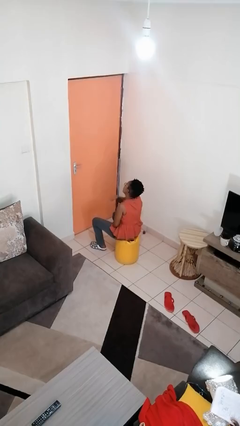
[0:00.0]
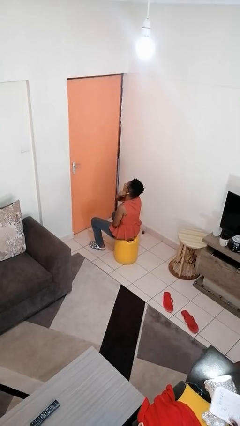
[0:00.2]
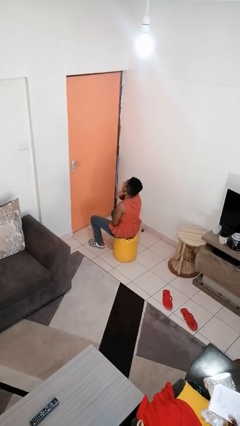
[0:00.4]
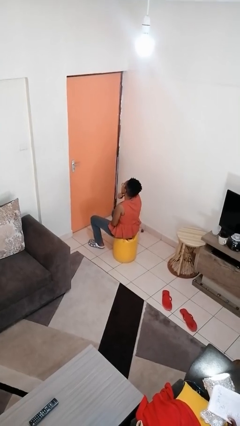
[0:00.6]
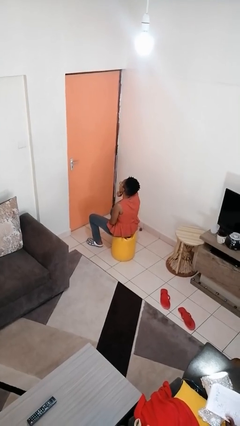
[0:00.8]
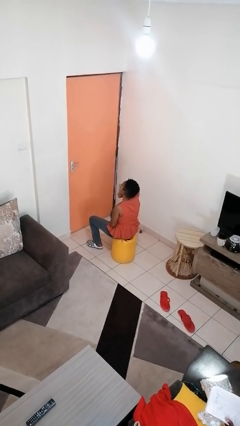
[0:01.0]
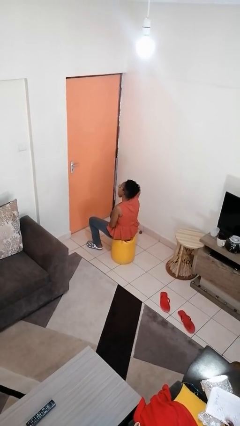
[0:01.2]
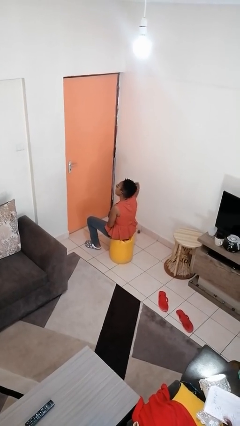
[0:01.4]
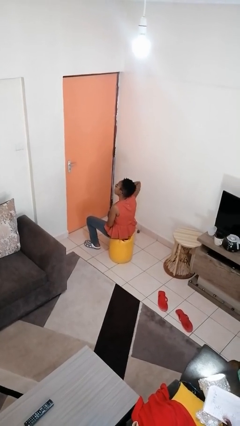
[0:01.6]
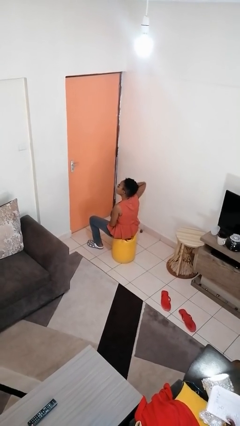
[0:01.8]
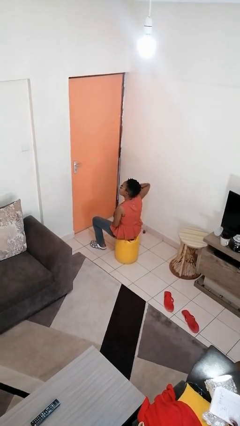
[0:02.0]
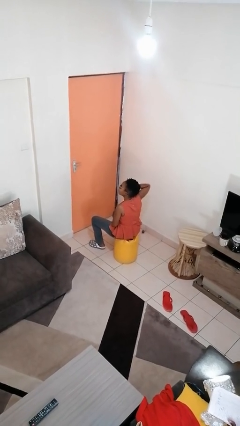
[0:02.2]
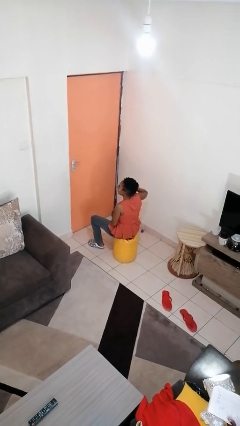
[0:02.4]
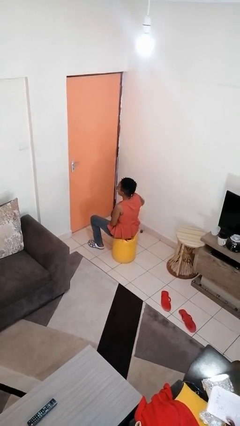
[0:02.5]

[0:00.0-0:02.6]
person gestures cut

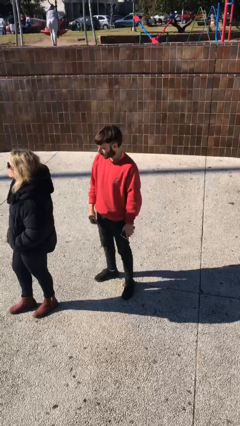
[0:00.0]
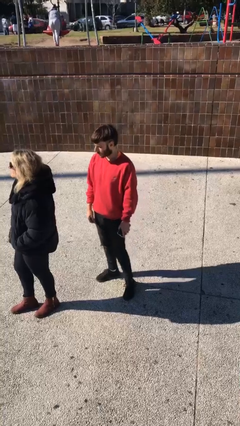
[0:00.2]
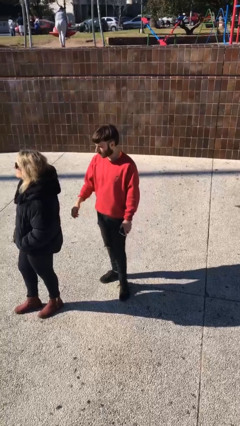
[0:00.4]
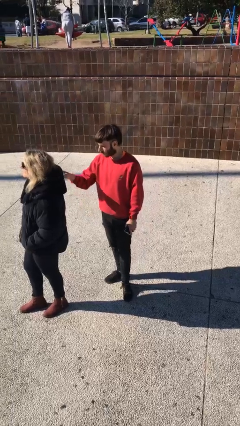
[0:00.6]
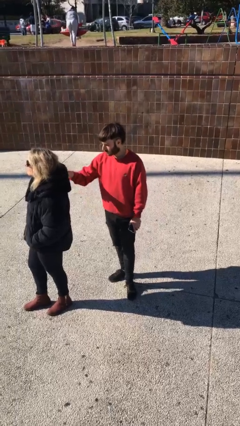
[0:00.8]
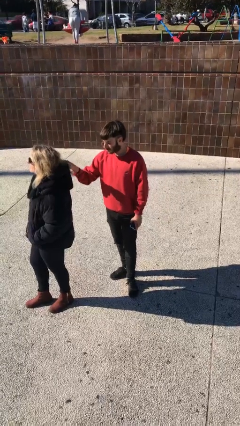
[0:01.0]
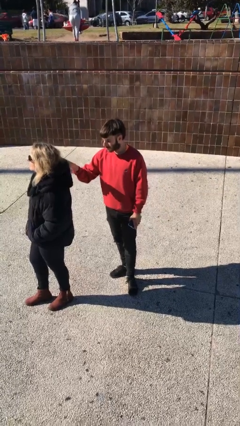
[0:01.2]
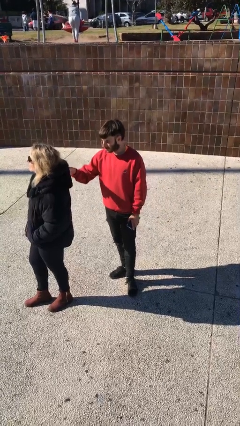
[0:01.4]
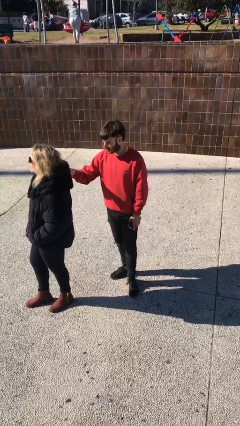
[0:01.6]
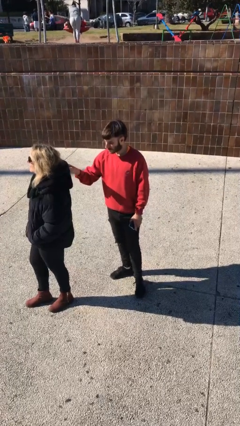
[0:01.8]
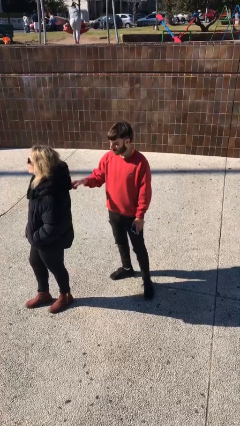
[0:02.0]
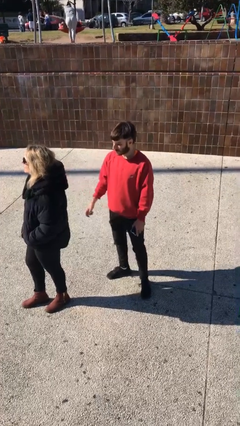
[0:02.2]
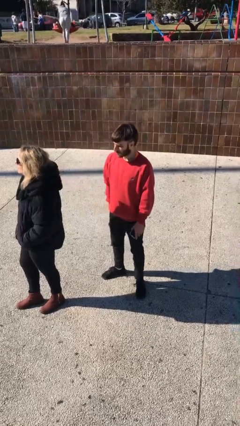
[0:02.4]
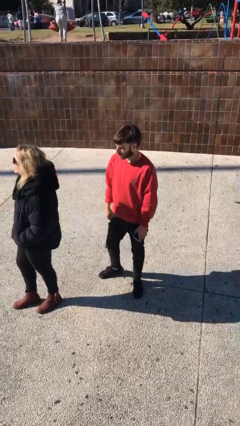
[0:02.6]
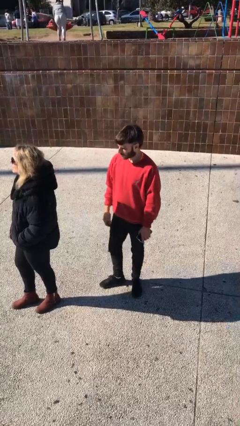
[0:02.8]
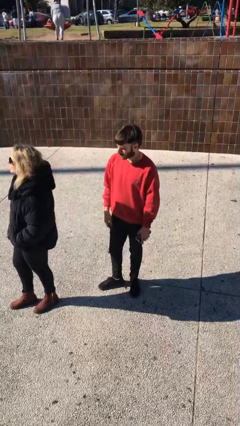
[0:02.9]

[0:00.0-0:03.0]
person touches back of person

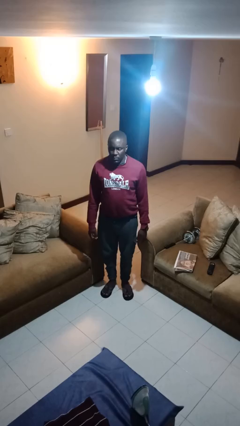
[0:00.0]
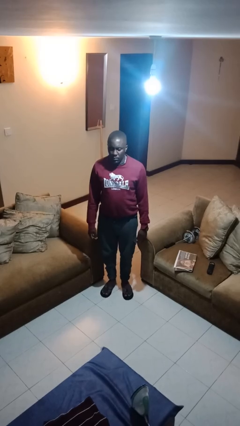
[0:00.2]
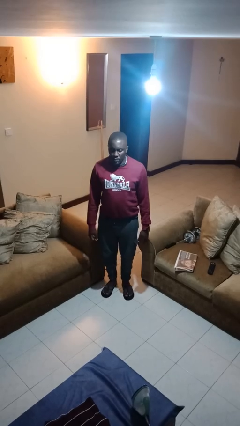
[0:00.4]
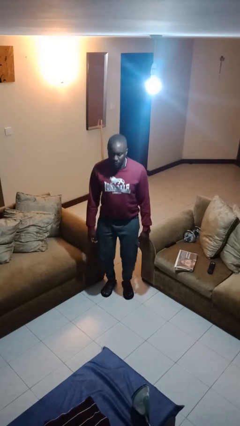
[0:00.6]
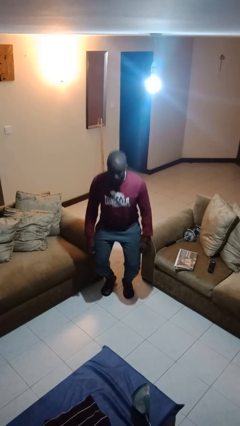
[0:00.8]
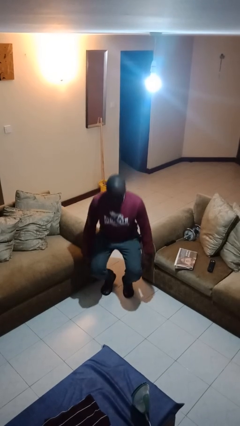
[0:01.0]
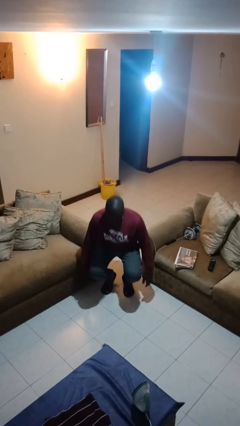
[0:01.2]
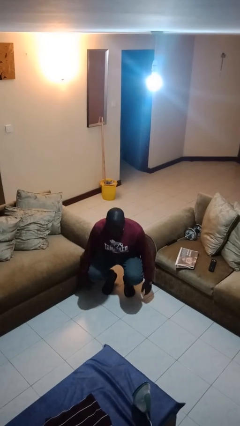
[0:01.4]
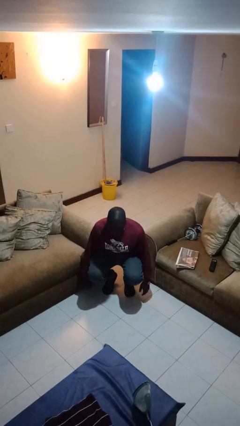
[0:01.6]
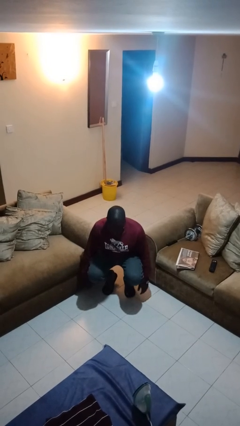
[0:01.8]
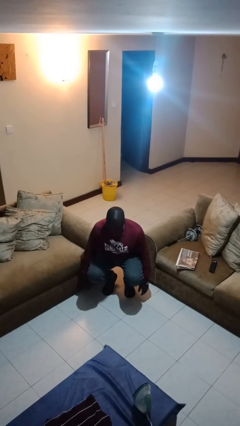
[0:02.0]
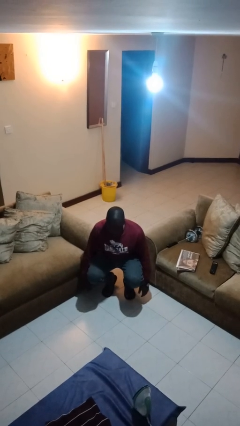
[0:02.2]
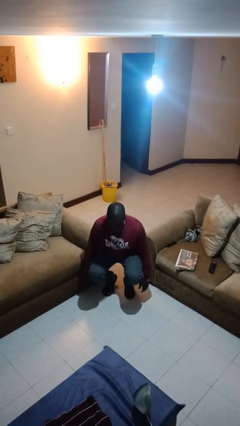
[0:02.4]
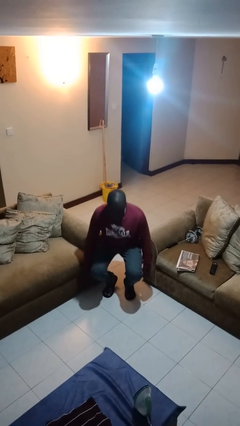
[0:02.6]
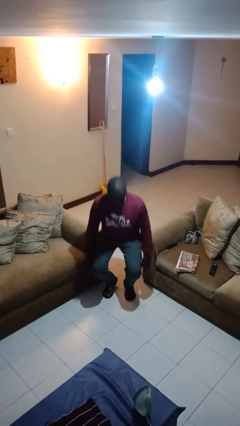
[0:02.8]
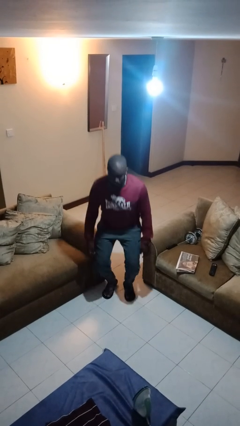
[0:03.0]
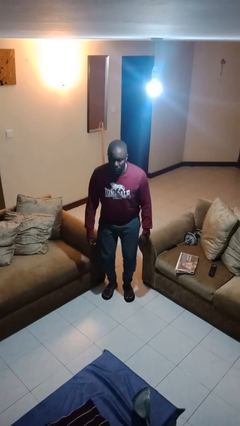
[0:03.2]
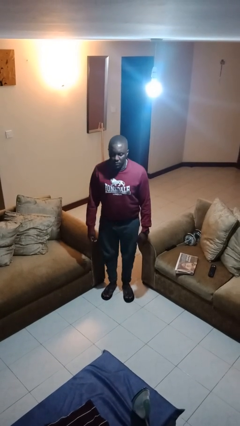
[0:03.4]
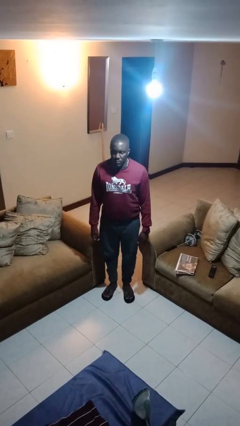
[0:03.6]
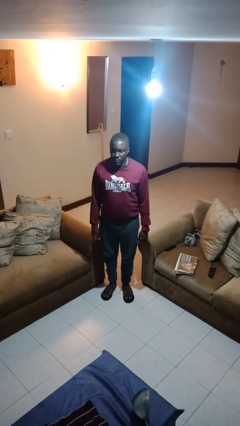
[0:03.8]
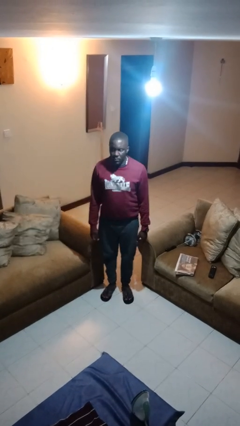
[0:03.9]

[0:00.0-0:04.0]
person squats

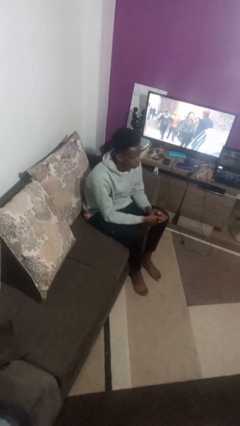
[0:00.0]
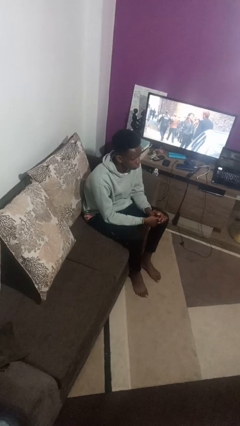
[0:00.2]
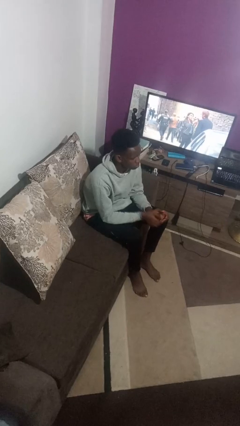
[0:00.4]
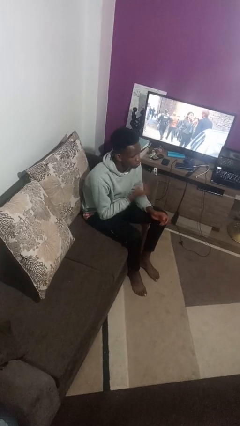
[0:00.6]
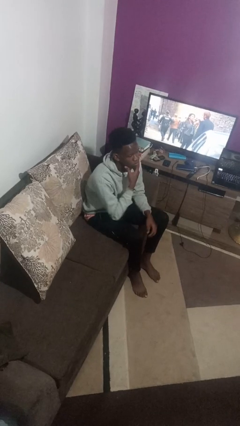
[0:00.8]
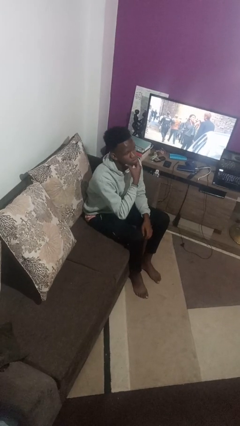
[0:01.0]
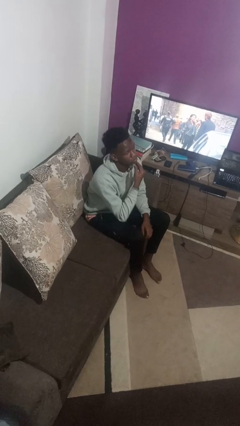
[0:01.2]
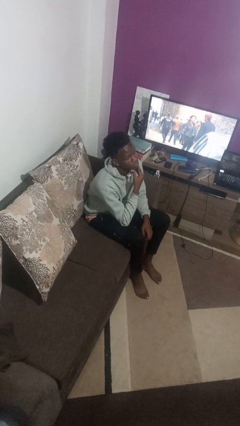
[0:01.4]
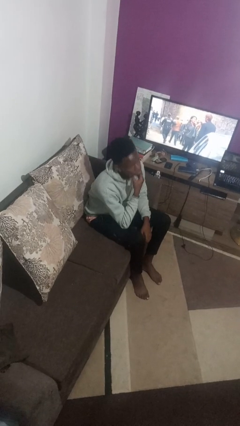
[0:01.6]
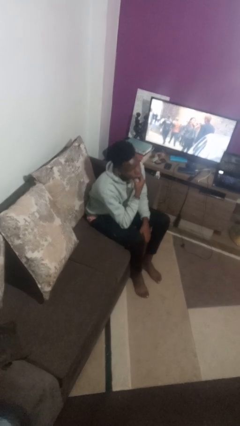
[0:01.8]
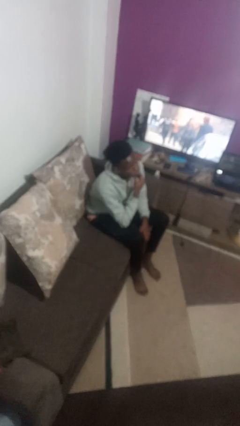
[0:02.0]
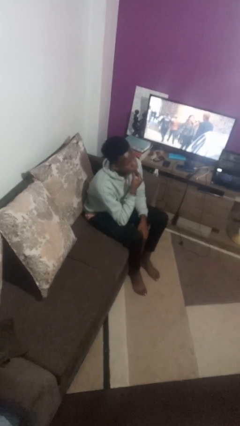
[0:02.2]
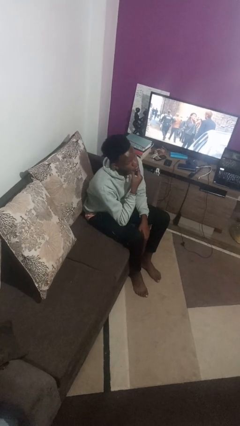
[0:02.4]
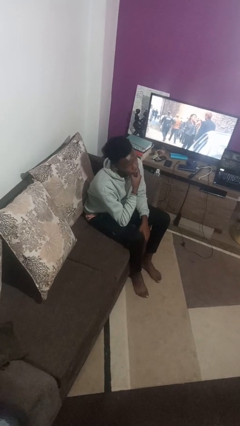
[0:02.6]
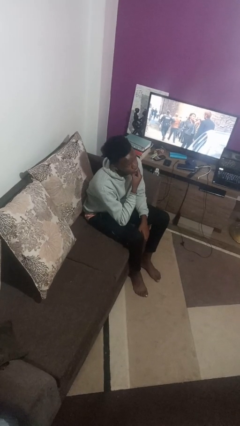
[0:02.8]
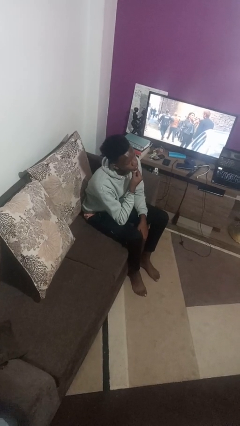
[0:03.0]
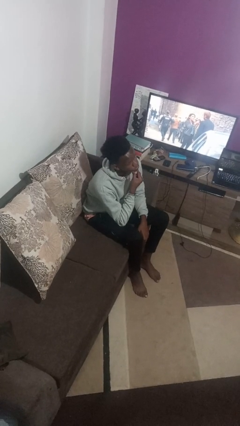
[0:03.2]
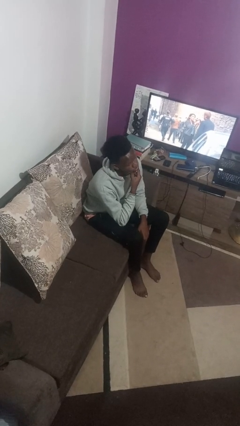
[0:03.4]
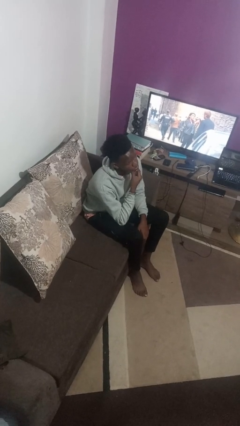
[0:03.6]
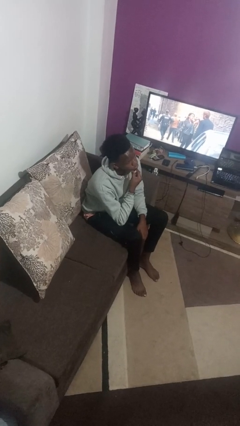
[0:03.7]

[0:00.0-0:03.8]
person strokes chin

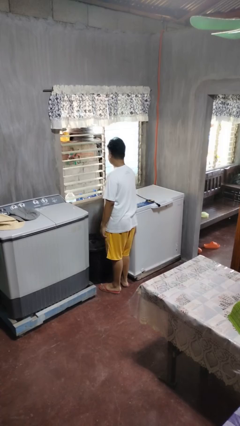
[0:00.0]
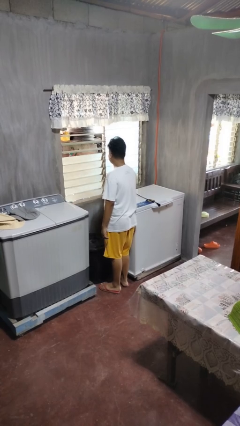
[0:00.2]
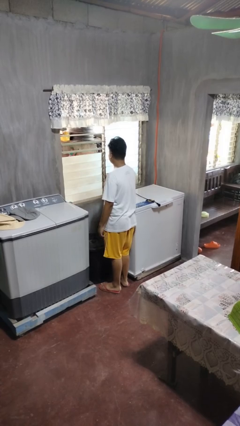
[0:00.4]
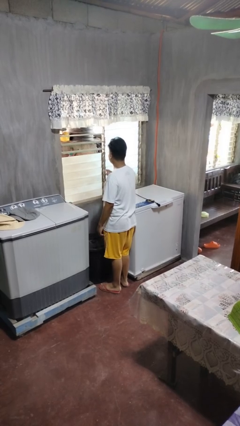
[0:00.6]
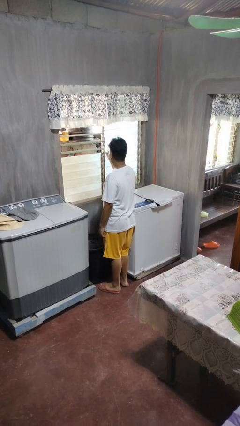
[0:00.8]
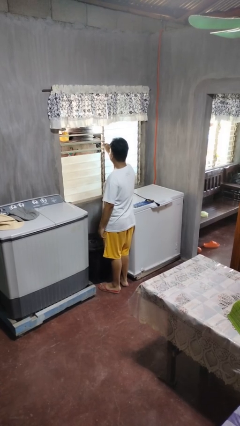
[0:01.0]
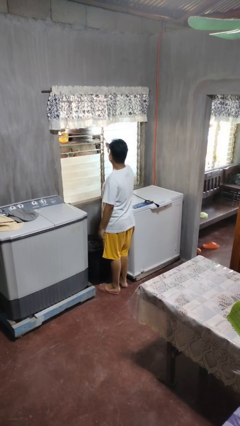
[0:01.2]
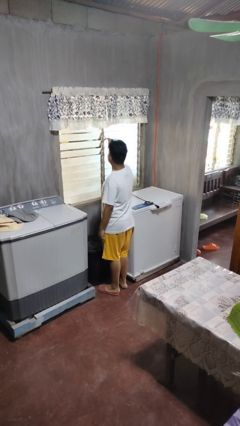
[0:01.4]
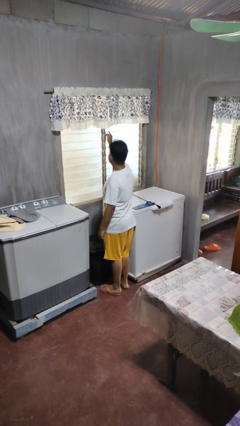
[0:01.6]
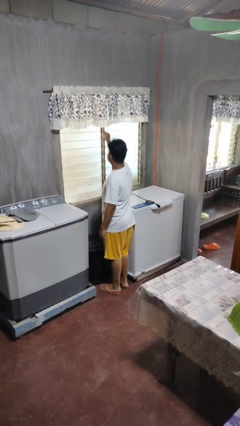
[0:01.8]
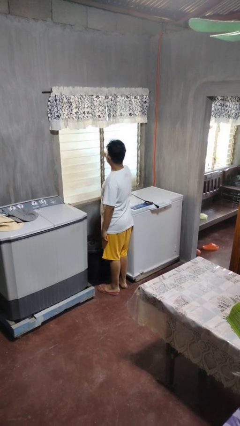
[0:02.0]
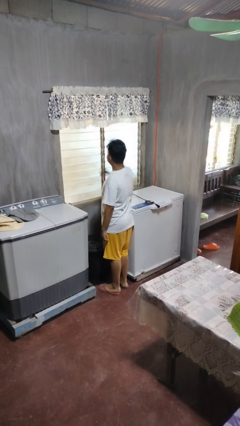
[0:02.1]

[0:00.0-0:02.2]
person closes home window

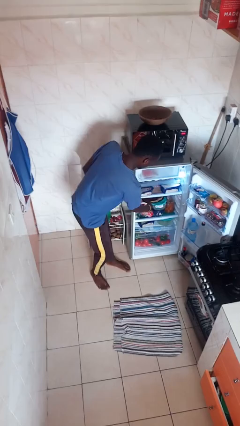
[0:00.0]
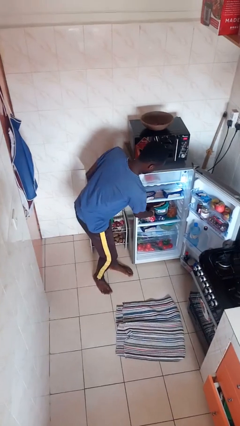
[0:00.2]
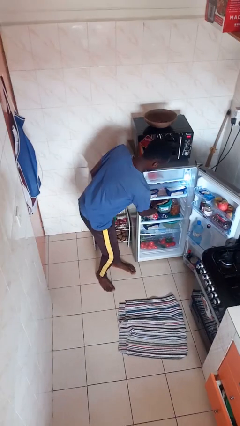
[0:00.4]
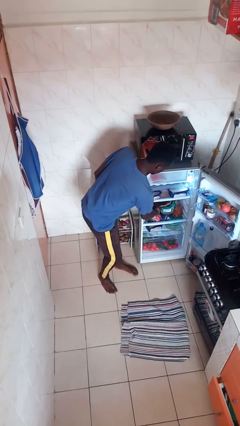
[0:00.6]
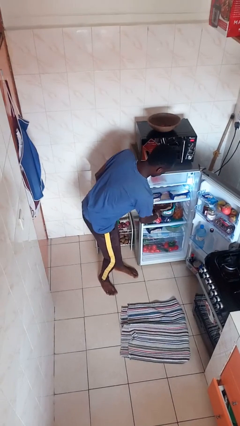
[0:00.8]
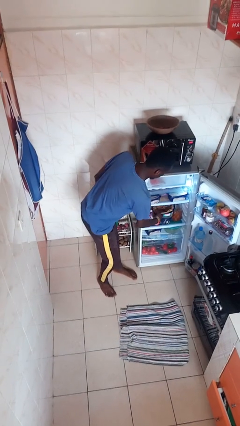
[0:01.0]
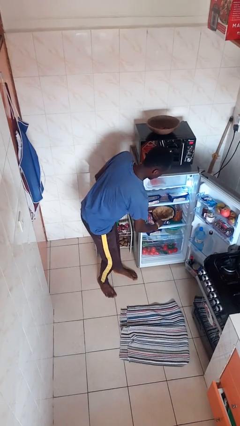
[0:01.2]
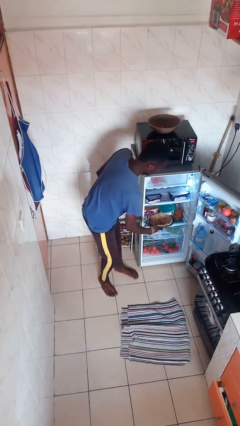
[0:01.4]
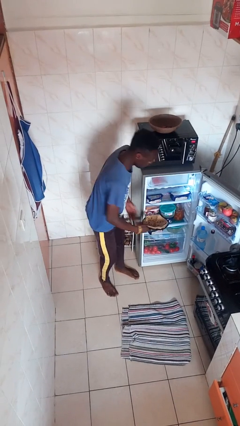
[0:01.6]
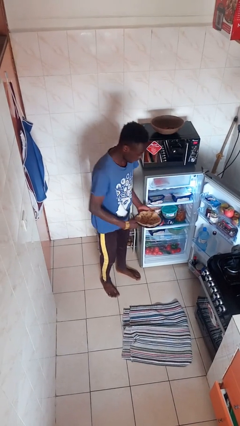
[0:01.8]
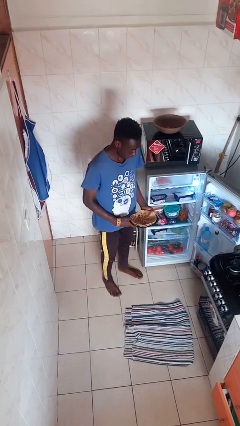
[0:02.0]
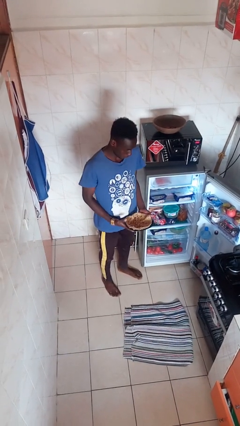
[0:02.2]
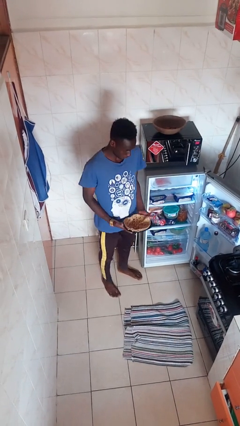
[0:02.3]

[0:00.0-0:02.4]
person takes object from refrigerator
